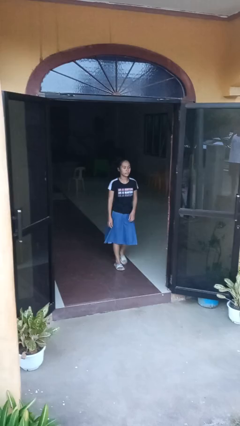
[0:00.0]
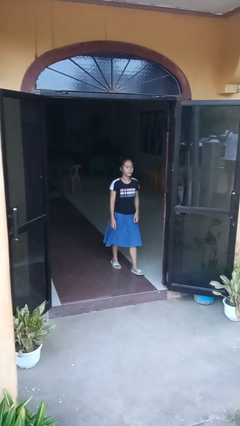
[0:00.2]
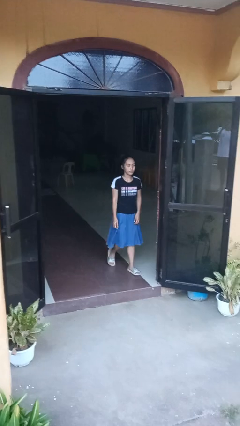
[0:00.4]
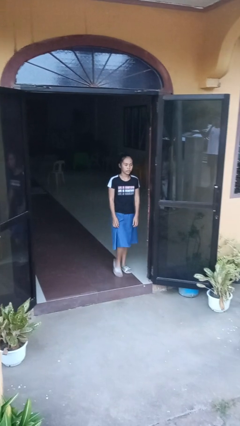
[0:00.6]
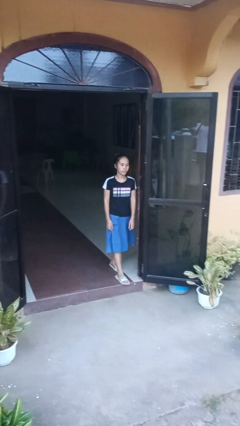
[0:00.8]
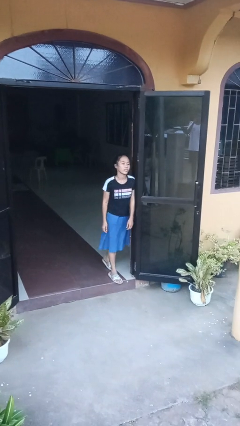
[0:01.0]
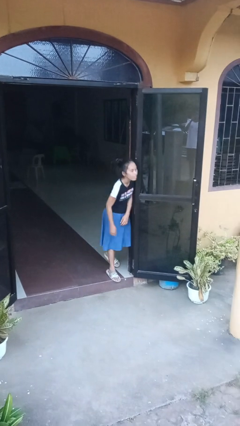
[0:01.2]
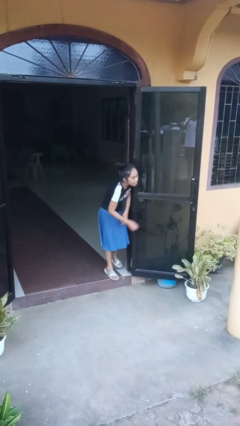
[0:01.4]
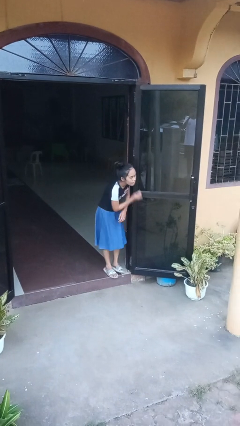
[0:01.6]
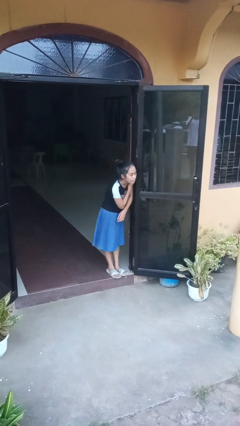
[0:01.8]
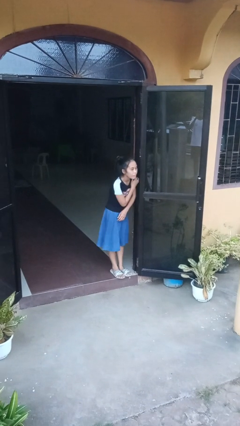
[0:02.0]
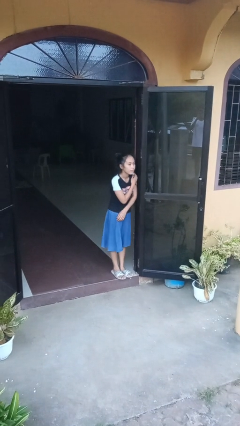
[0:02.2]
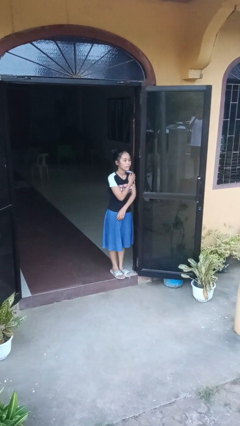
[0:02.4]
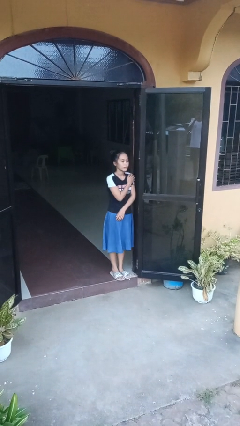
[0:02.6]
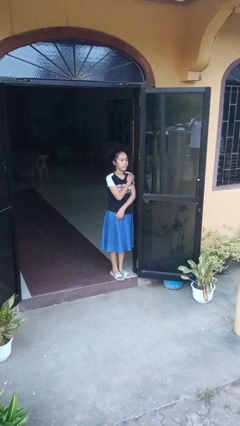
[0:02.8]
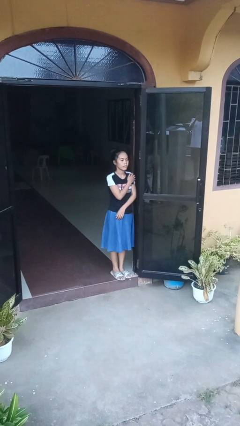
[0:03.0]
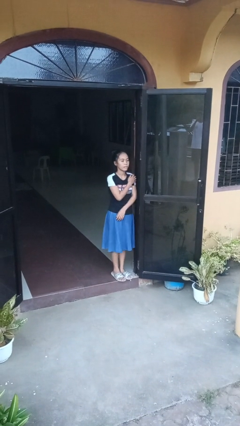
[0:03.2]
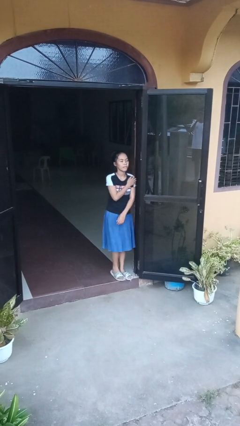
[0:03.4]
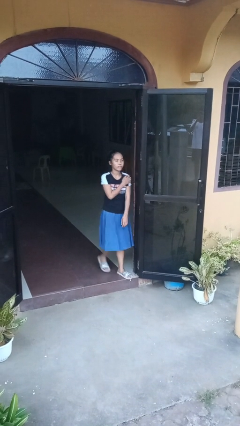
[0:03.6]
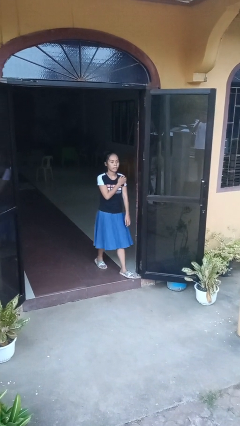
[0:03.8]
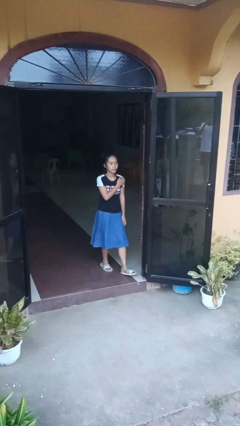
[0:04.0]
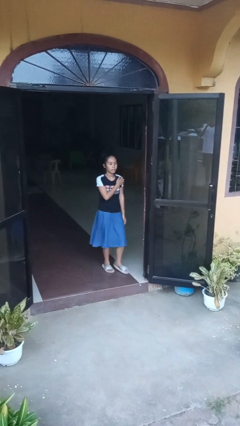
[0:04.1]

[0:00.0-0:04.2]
person bumps into wall

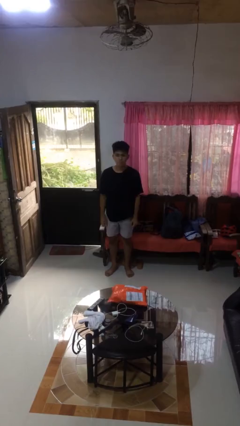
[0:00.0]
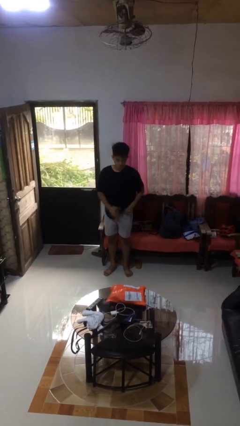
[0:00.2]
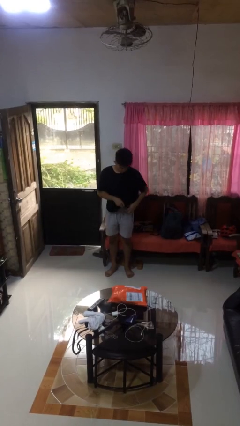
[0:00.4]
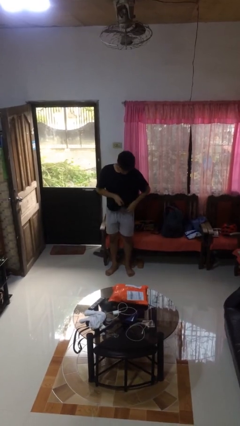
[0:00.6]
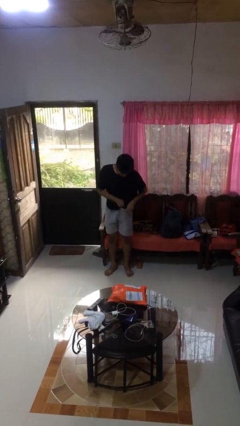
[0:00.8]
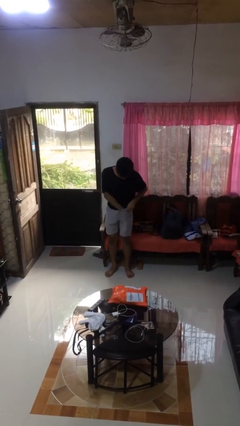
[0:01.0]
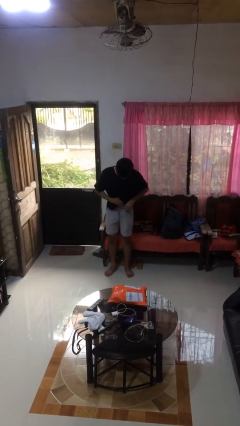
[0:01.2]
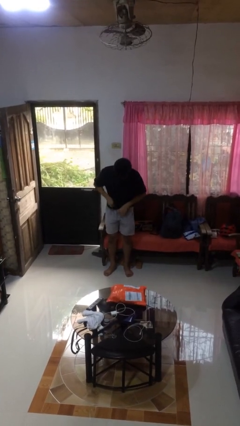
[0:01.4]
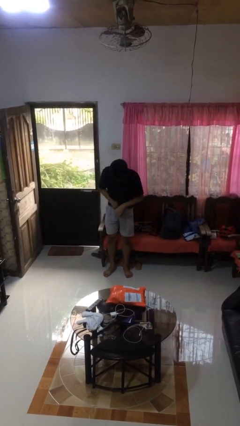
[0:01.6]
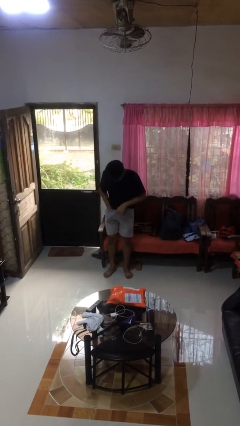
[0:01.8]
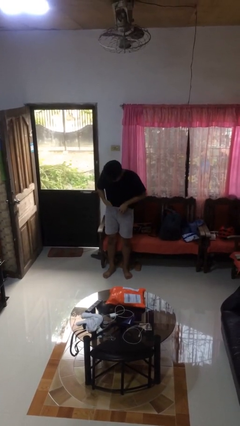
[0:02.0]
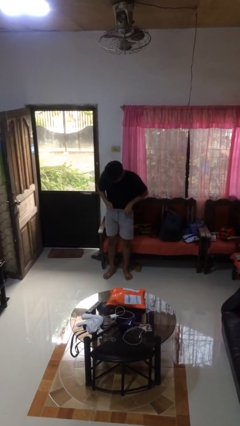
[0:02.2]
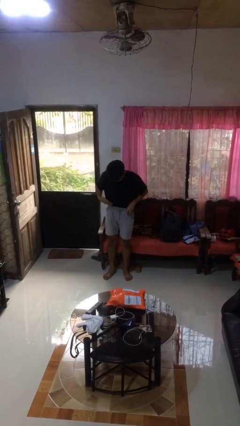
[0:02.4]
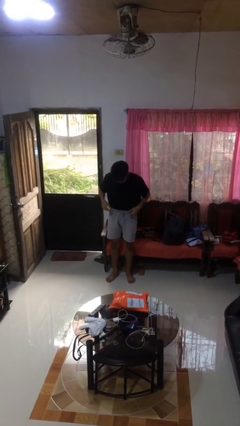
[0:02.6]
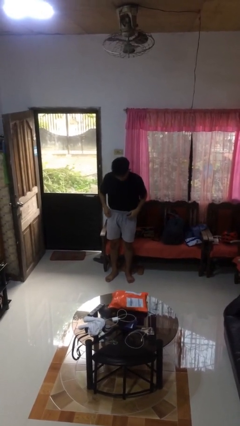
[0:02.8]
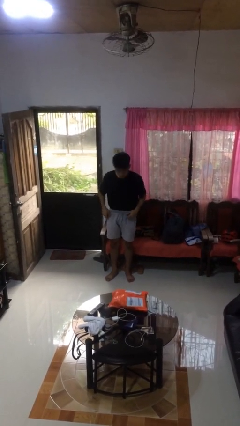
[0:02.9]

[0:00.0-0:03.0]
person tucks in shirt

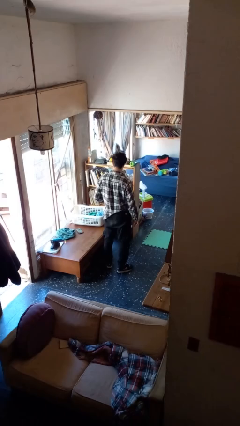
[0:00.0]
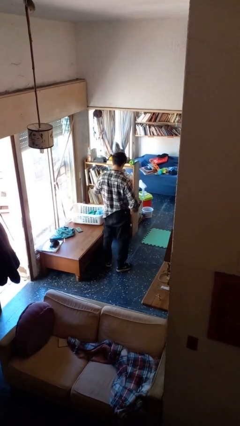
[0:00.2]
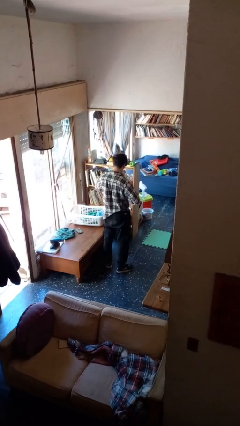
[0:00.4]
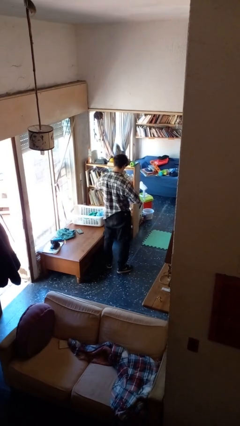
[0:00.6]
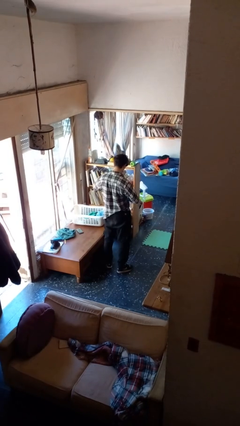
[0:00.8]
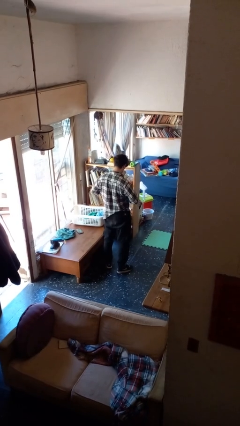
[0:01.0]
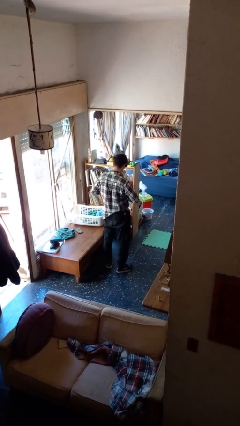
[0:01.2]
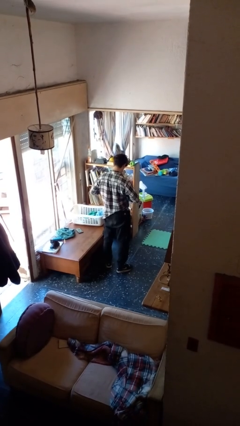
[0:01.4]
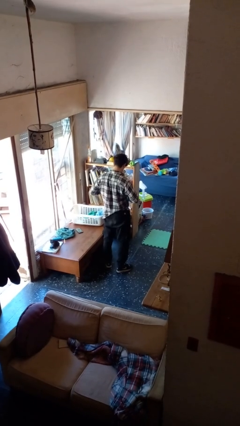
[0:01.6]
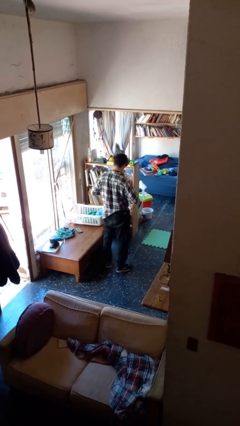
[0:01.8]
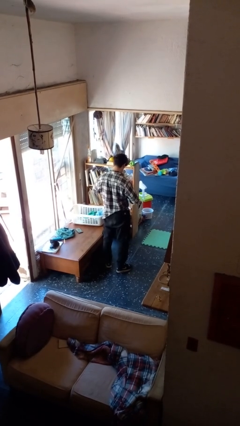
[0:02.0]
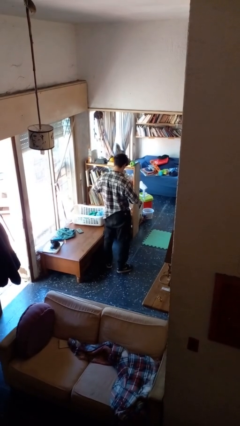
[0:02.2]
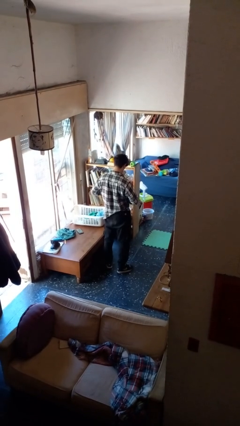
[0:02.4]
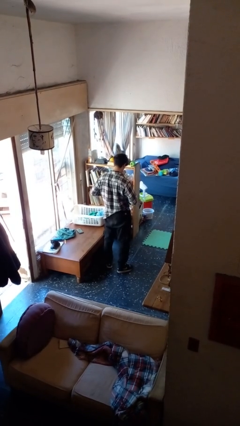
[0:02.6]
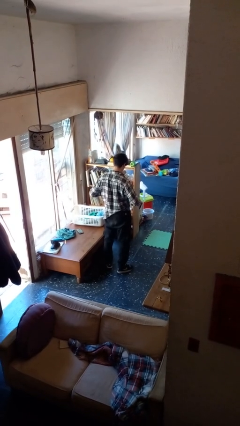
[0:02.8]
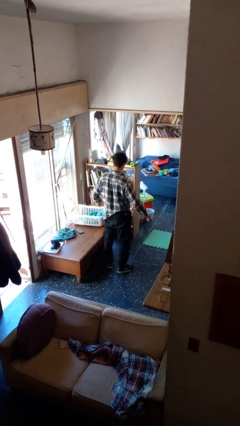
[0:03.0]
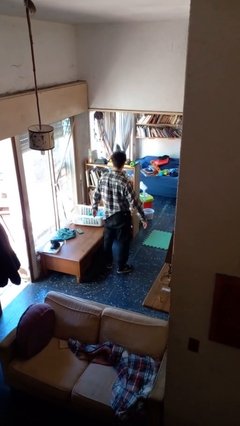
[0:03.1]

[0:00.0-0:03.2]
person unbuttons shirt

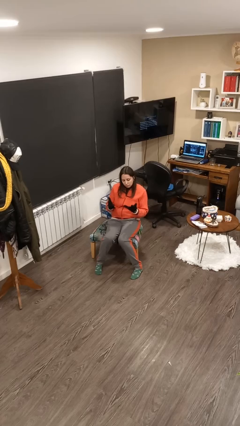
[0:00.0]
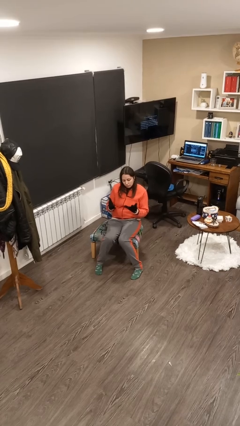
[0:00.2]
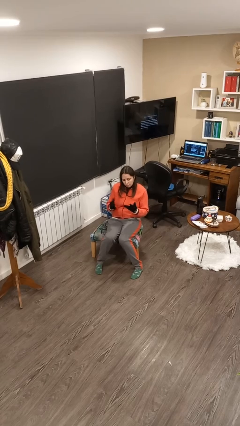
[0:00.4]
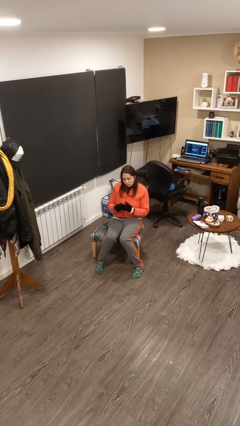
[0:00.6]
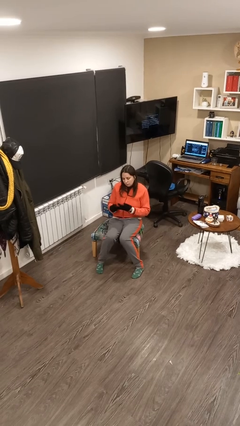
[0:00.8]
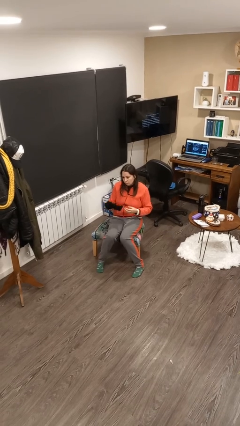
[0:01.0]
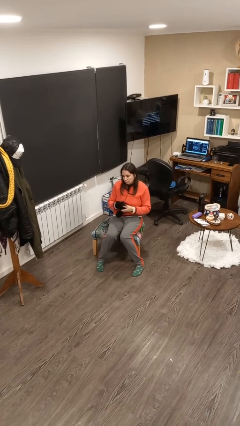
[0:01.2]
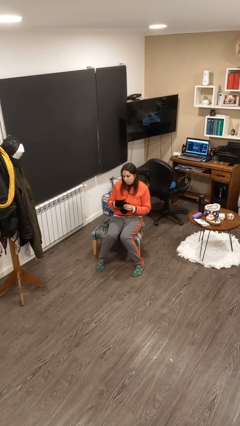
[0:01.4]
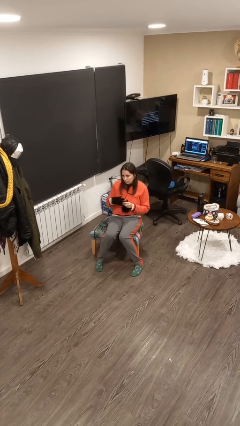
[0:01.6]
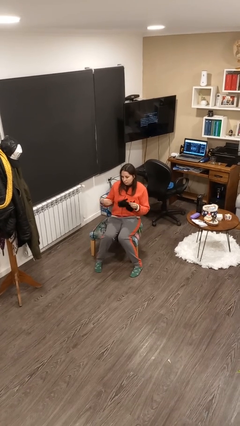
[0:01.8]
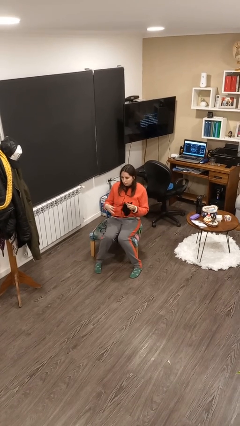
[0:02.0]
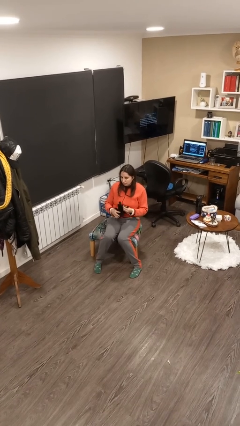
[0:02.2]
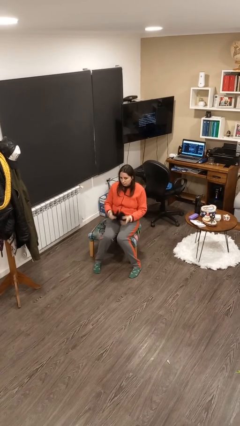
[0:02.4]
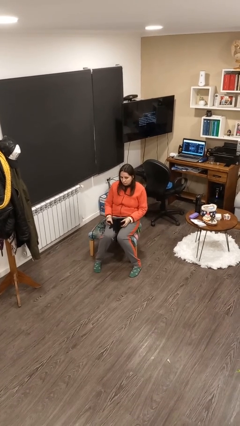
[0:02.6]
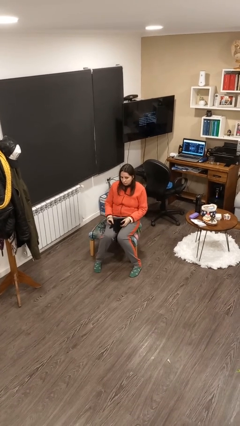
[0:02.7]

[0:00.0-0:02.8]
person takes off gloves

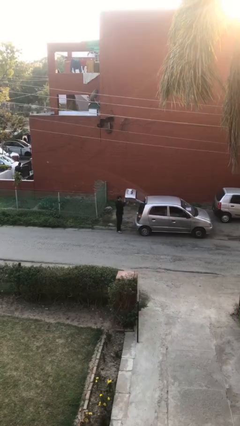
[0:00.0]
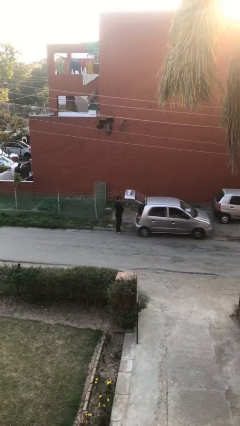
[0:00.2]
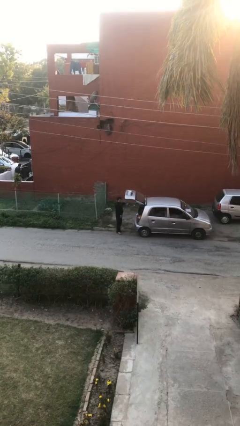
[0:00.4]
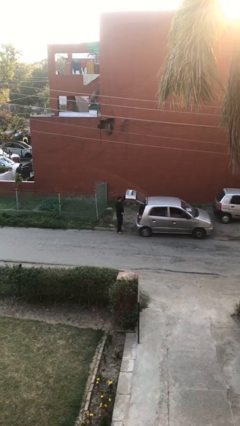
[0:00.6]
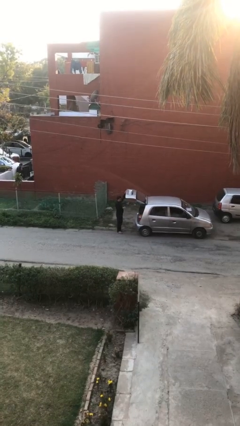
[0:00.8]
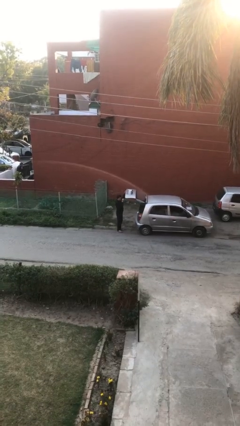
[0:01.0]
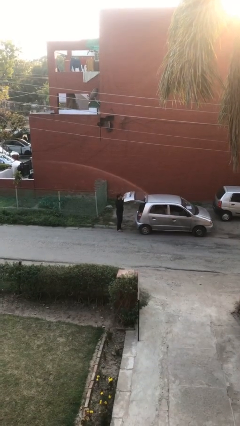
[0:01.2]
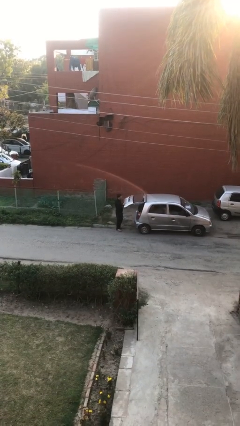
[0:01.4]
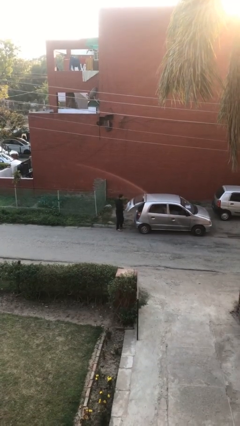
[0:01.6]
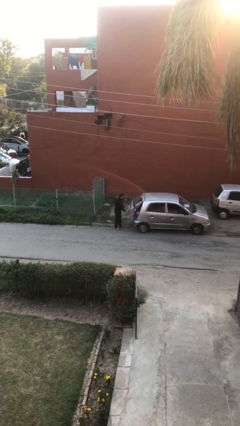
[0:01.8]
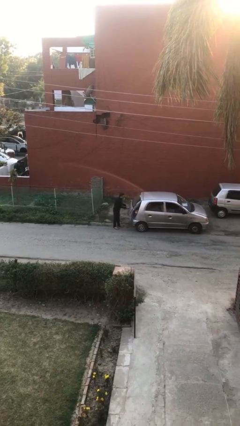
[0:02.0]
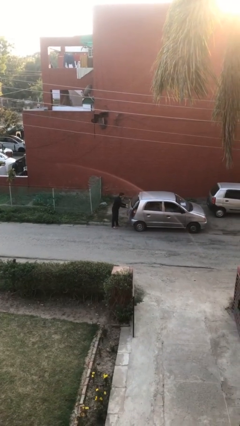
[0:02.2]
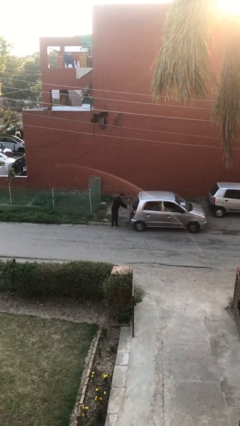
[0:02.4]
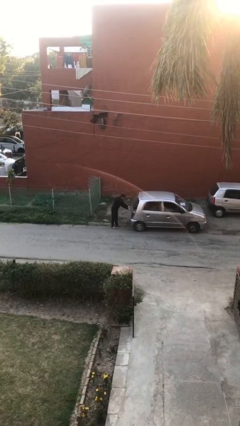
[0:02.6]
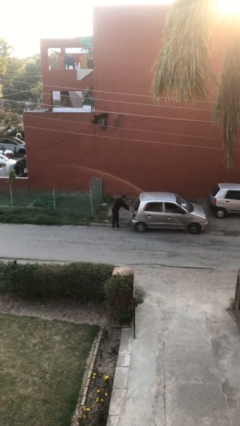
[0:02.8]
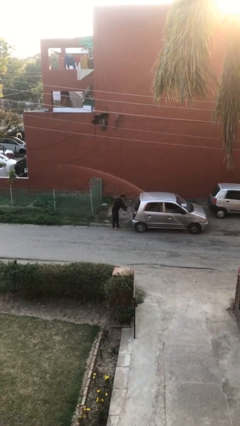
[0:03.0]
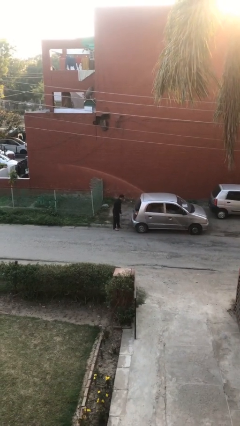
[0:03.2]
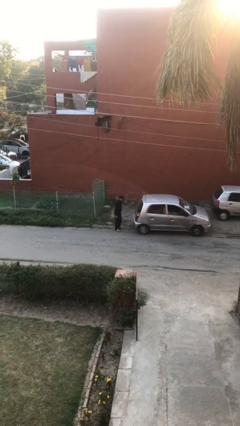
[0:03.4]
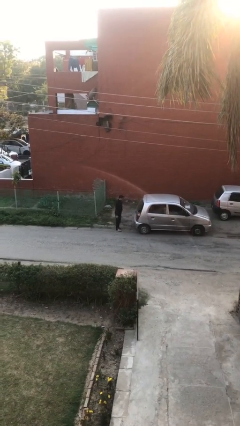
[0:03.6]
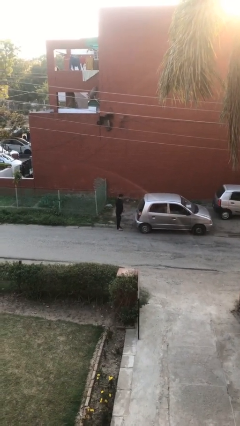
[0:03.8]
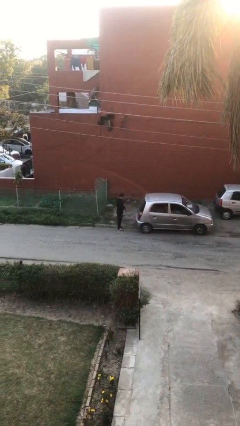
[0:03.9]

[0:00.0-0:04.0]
person closes car trunk

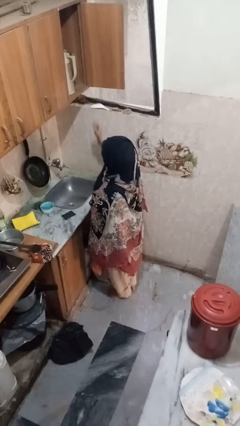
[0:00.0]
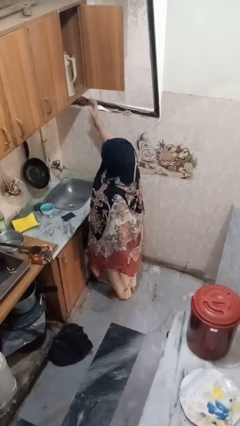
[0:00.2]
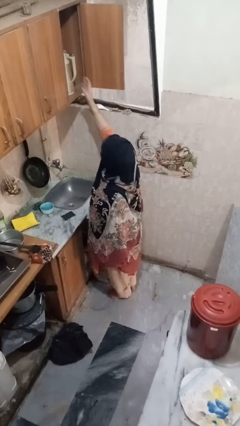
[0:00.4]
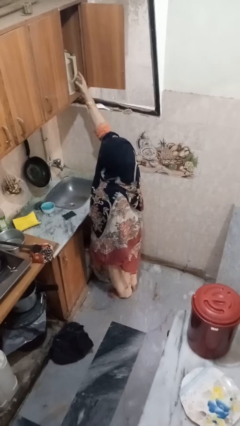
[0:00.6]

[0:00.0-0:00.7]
person puts object in cabinet
